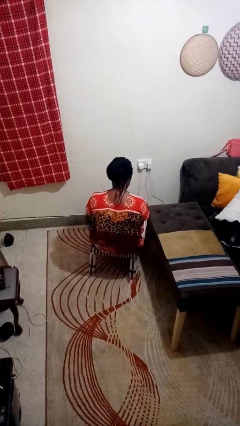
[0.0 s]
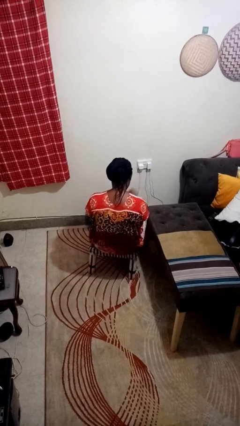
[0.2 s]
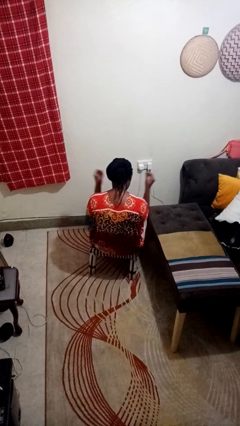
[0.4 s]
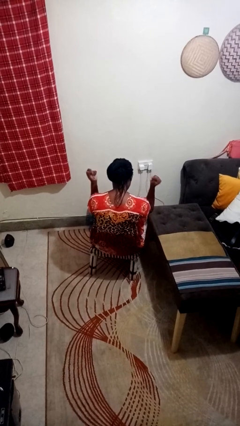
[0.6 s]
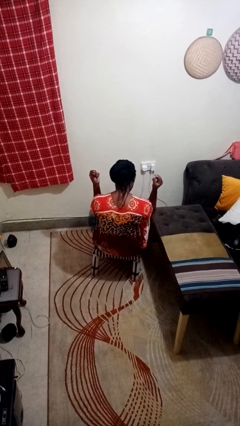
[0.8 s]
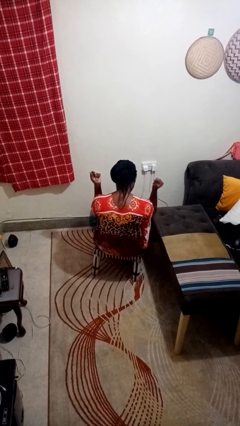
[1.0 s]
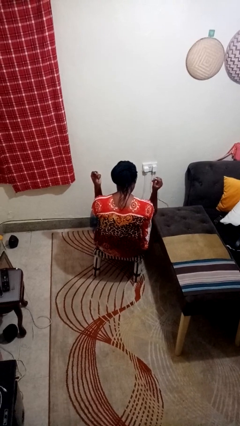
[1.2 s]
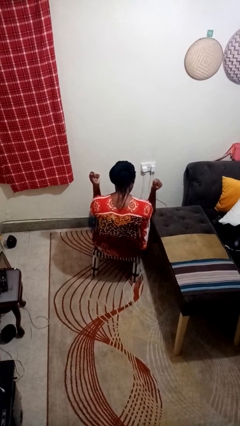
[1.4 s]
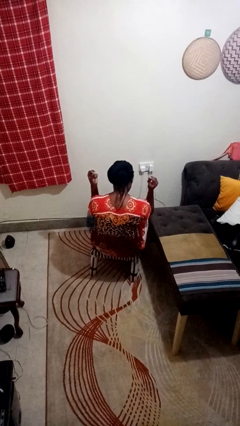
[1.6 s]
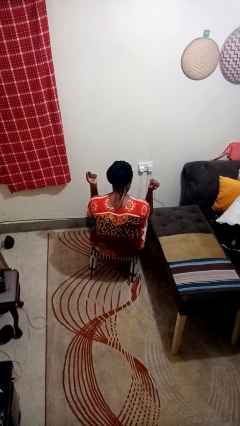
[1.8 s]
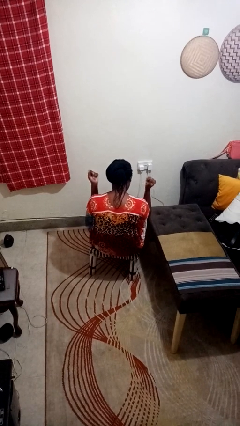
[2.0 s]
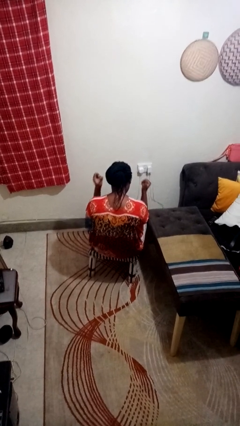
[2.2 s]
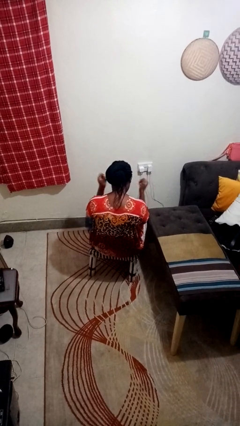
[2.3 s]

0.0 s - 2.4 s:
person snaps fingers

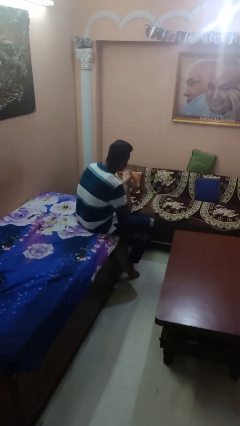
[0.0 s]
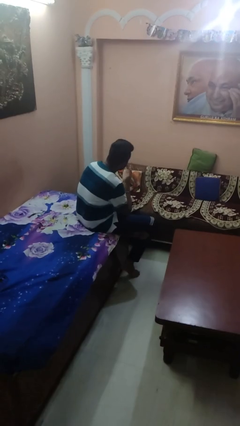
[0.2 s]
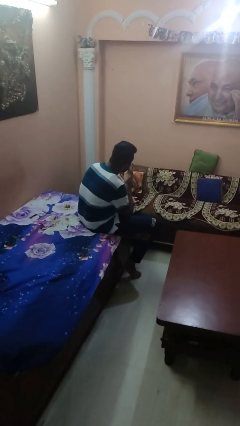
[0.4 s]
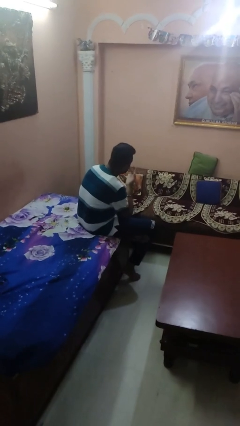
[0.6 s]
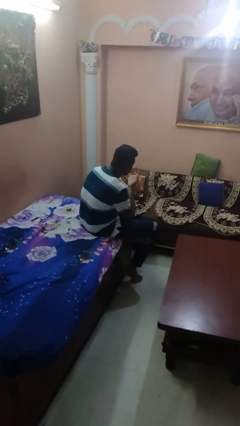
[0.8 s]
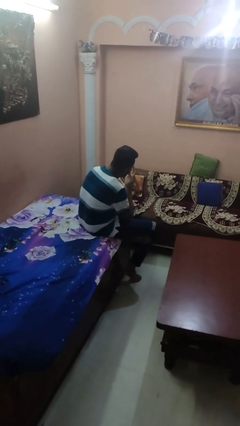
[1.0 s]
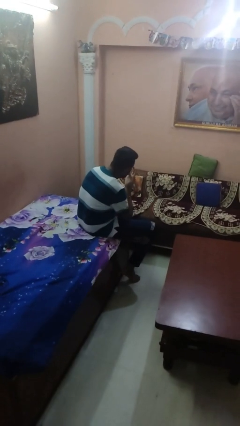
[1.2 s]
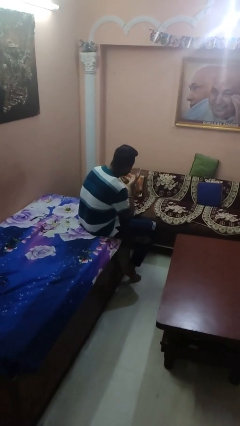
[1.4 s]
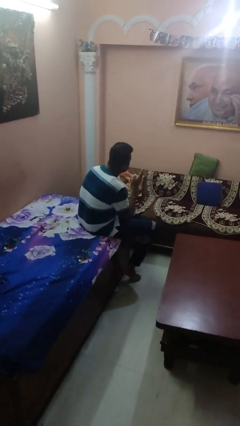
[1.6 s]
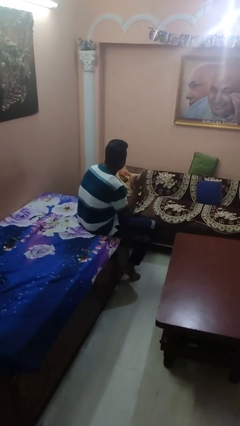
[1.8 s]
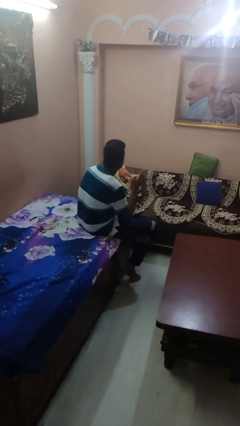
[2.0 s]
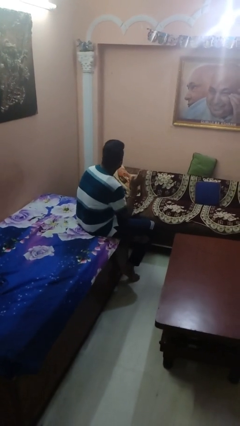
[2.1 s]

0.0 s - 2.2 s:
person licks fingers

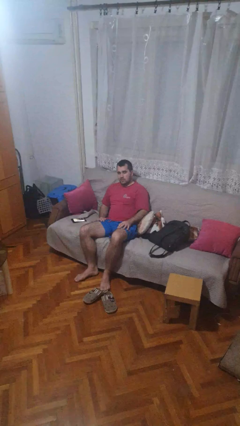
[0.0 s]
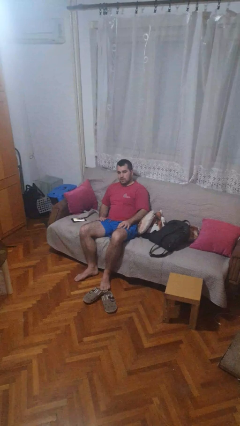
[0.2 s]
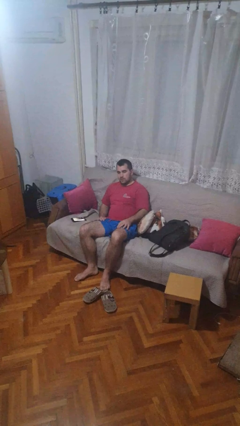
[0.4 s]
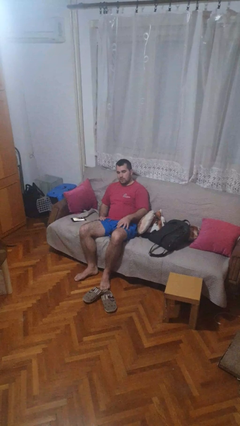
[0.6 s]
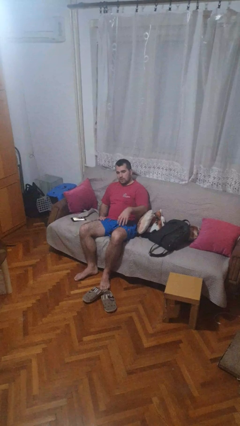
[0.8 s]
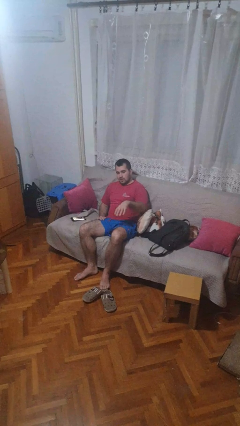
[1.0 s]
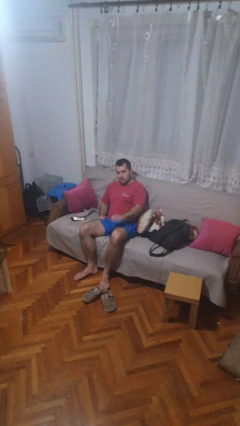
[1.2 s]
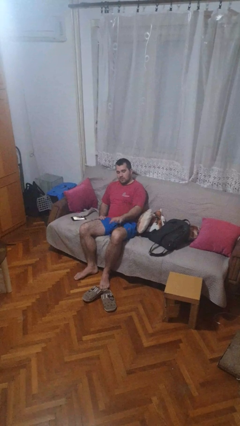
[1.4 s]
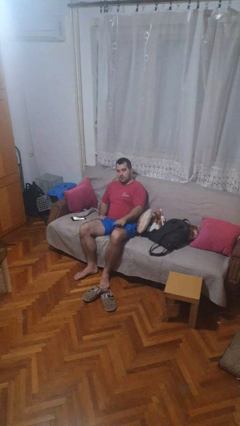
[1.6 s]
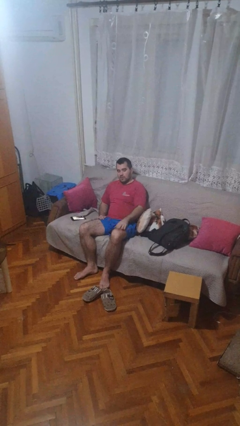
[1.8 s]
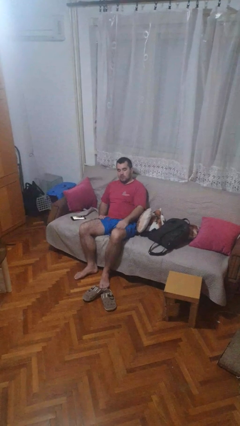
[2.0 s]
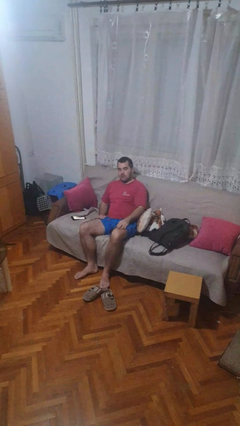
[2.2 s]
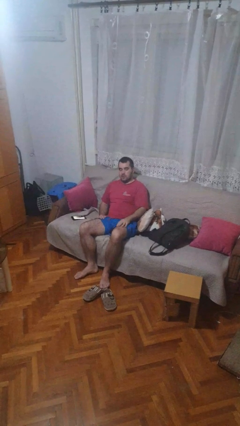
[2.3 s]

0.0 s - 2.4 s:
person slaps hands on thighs

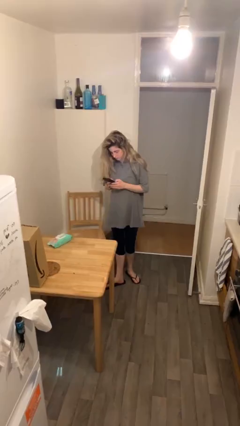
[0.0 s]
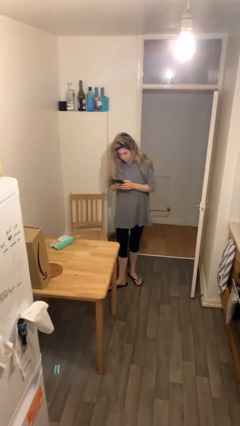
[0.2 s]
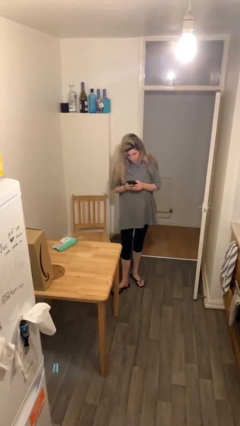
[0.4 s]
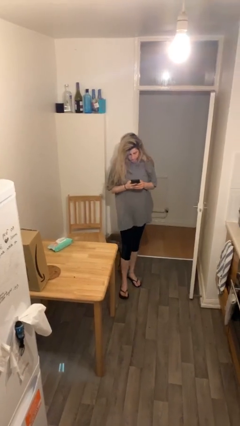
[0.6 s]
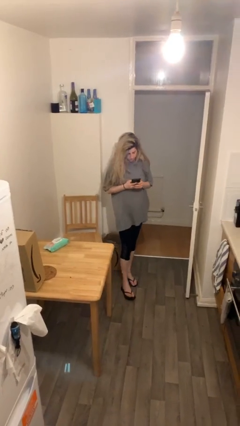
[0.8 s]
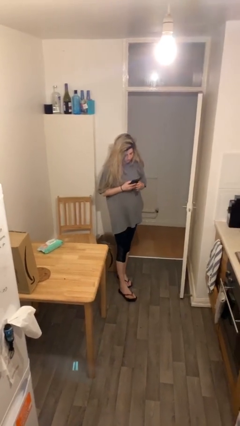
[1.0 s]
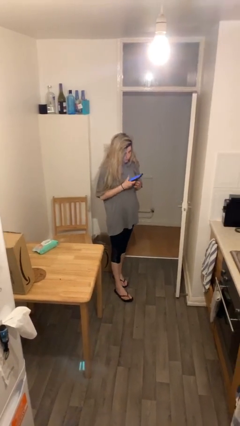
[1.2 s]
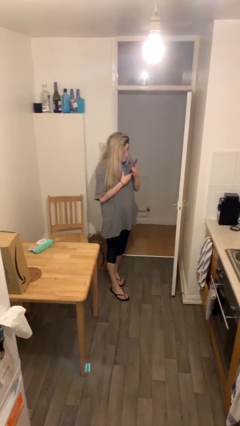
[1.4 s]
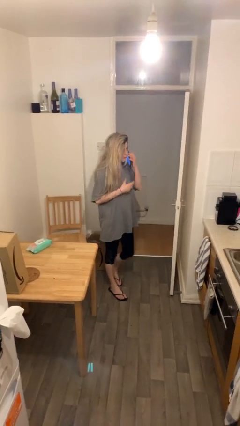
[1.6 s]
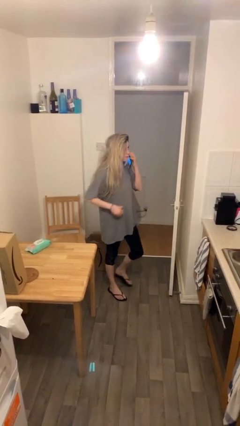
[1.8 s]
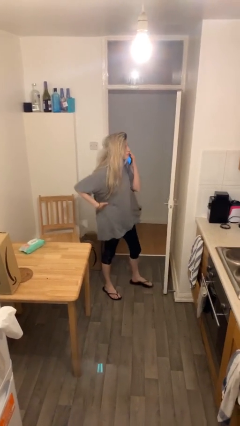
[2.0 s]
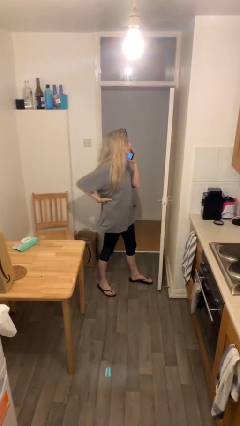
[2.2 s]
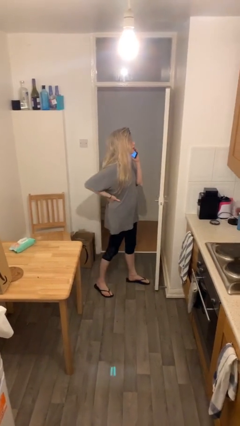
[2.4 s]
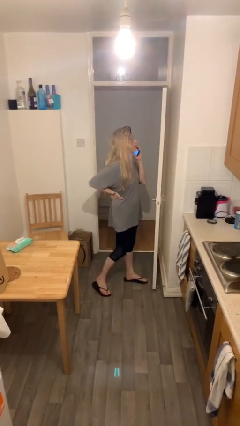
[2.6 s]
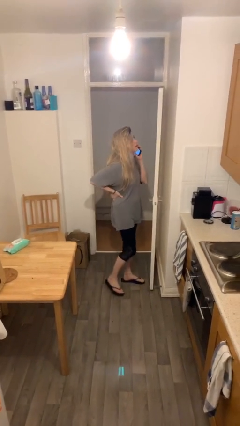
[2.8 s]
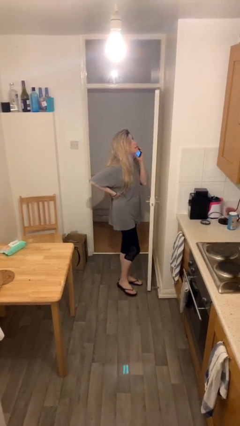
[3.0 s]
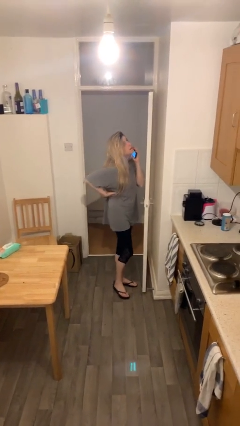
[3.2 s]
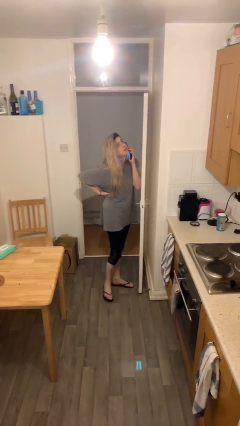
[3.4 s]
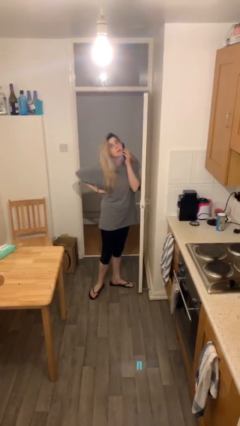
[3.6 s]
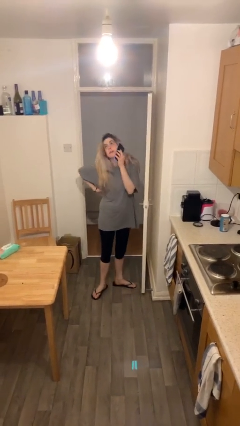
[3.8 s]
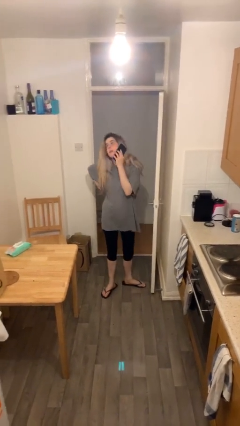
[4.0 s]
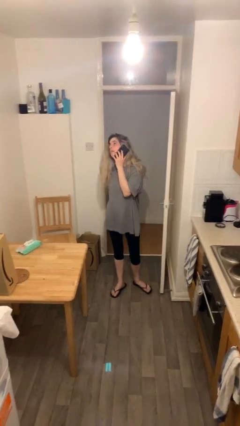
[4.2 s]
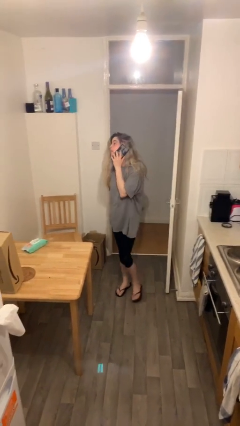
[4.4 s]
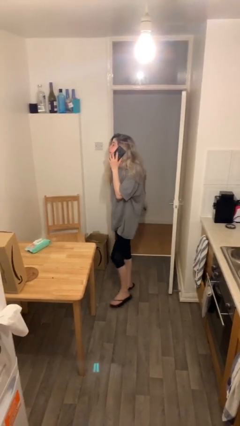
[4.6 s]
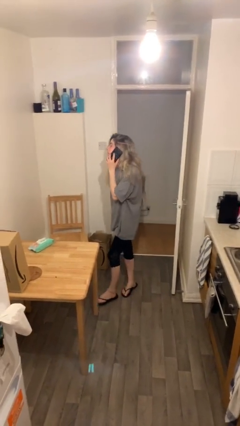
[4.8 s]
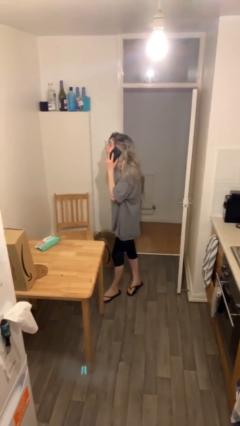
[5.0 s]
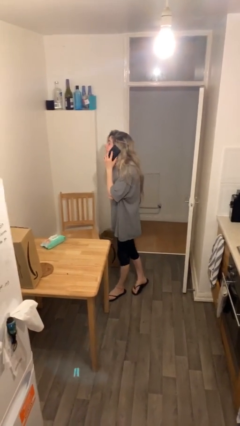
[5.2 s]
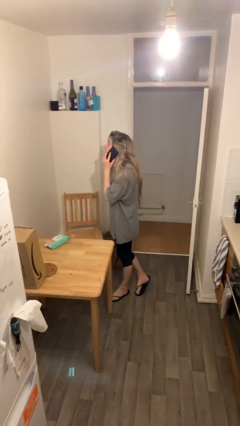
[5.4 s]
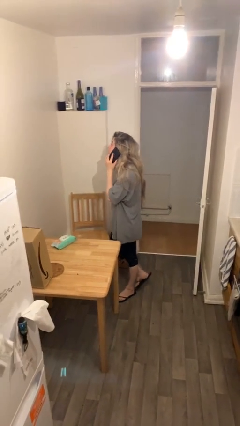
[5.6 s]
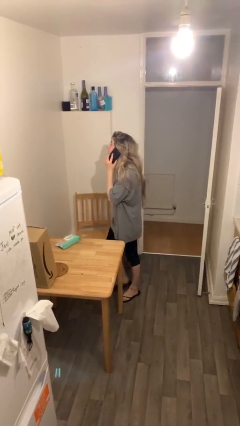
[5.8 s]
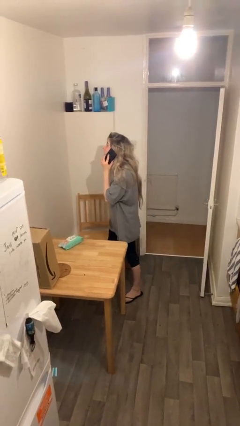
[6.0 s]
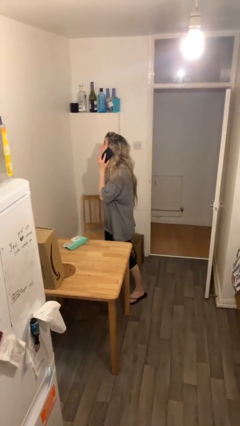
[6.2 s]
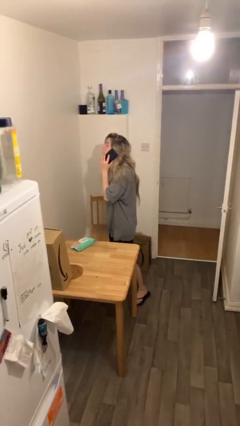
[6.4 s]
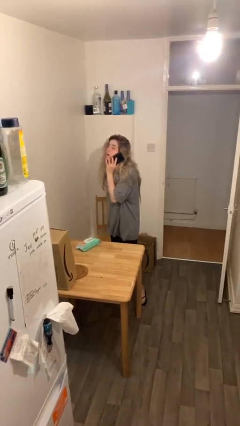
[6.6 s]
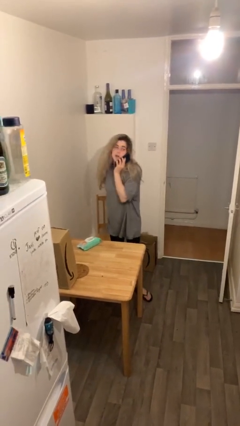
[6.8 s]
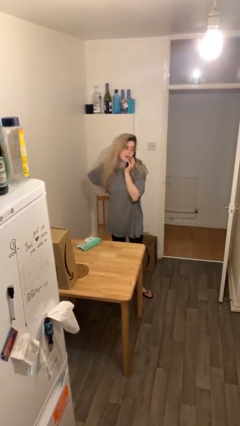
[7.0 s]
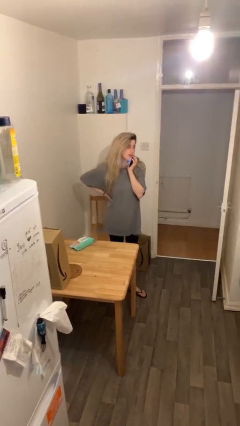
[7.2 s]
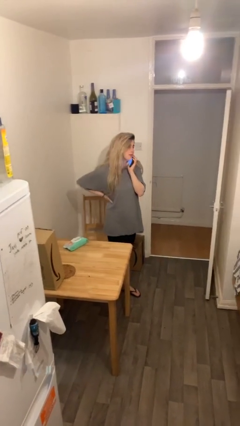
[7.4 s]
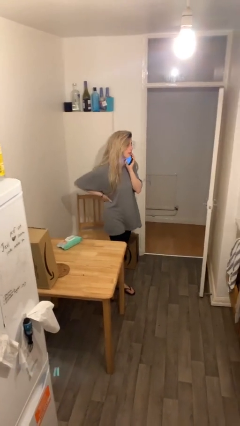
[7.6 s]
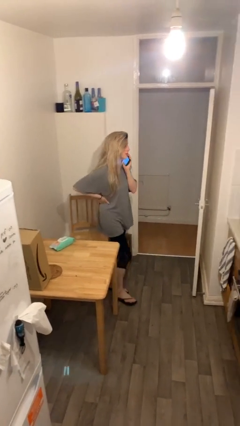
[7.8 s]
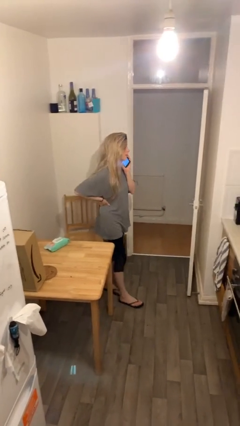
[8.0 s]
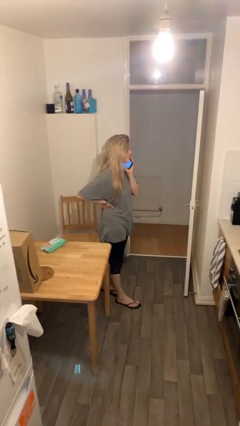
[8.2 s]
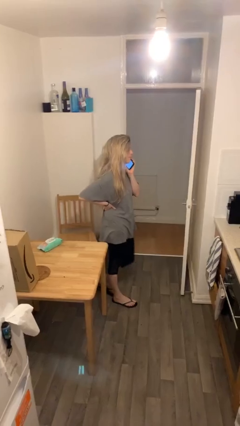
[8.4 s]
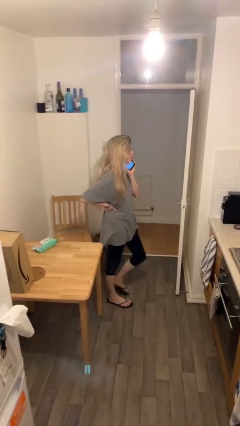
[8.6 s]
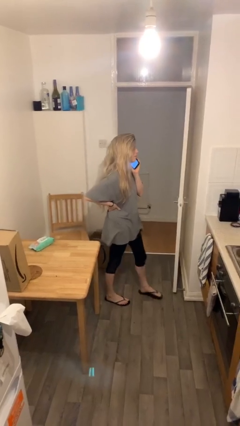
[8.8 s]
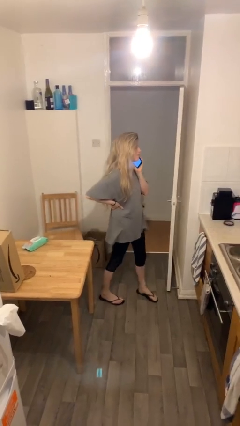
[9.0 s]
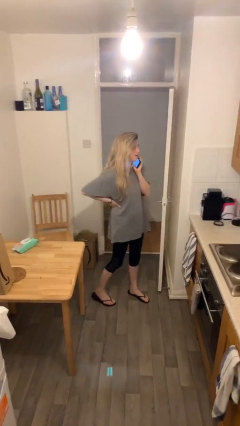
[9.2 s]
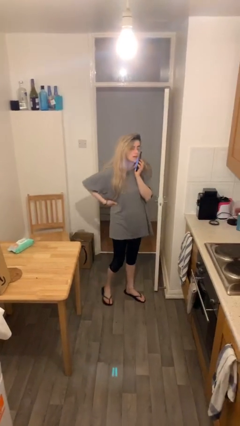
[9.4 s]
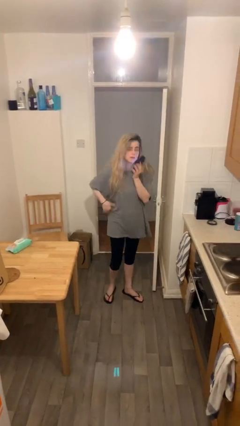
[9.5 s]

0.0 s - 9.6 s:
person talks on phone

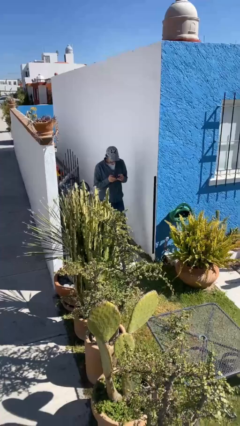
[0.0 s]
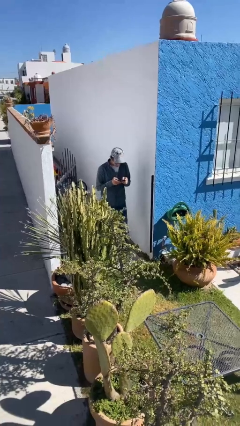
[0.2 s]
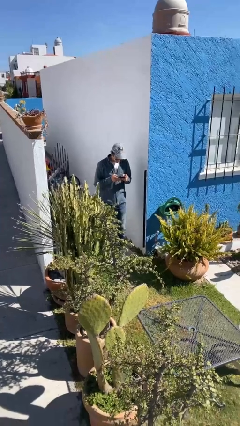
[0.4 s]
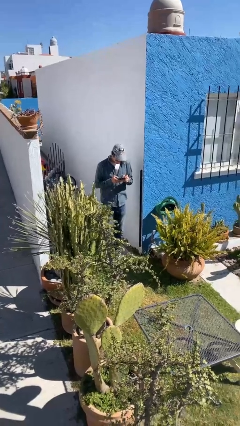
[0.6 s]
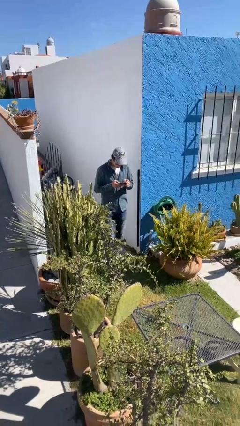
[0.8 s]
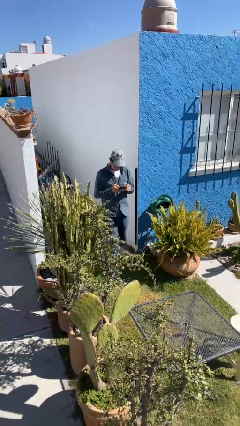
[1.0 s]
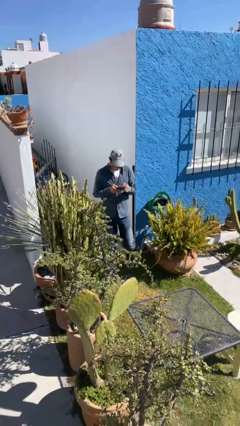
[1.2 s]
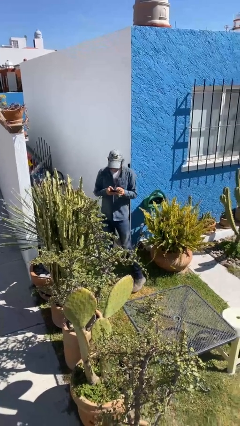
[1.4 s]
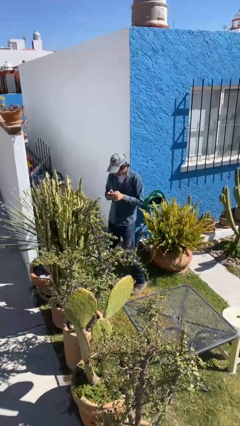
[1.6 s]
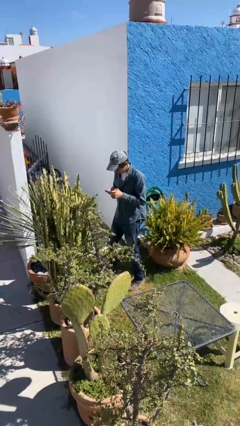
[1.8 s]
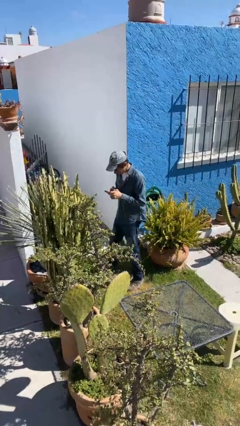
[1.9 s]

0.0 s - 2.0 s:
person enters scene through structure
